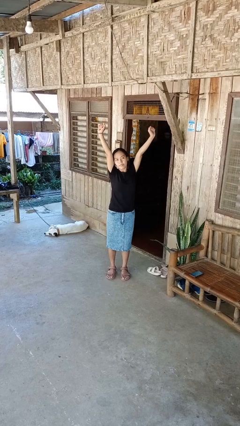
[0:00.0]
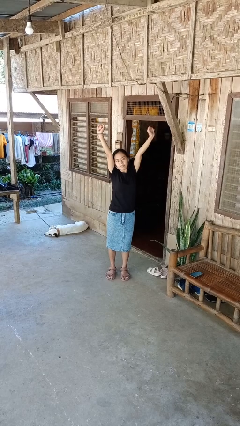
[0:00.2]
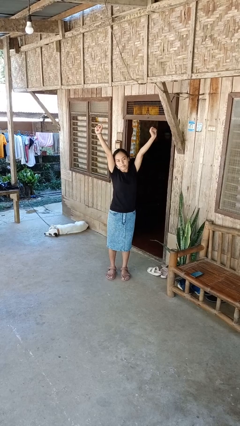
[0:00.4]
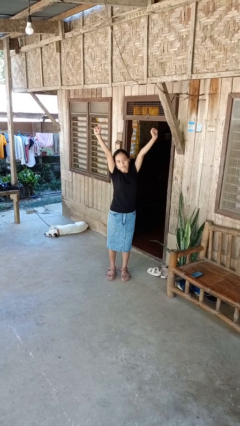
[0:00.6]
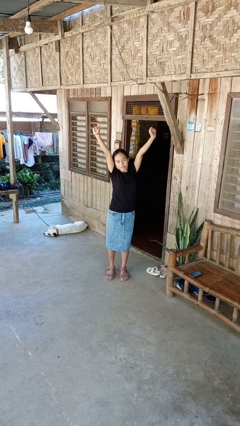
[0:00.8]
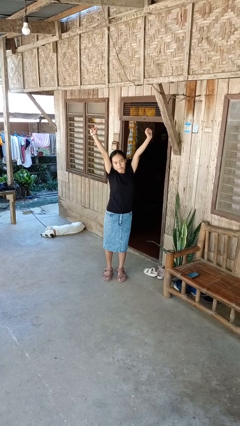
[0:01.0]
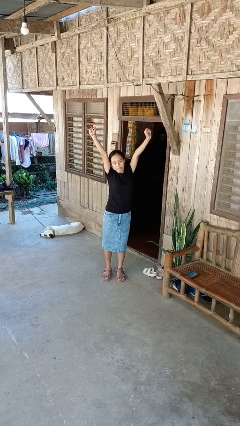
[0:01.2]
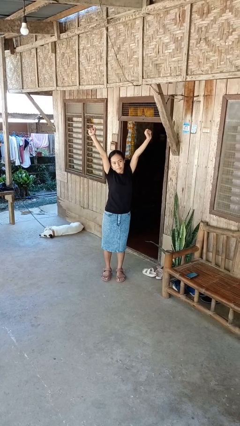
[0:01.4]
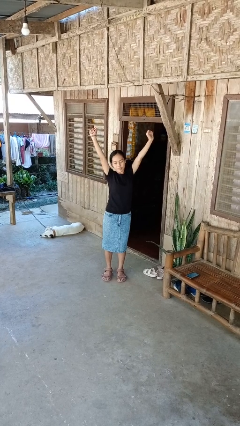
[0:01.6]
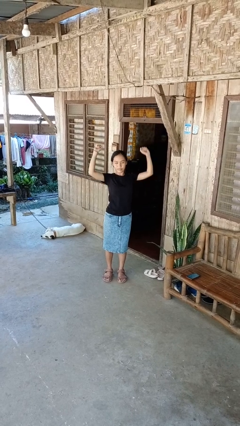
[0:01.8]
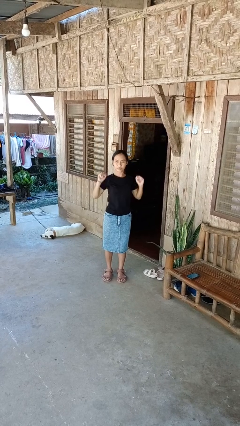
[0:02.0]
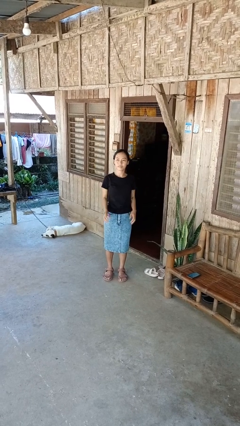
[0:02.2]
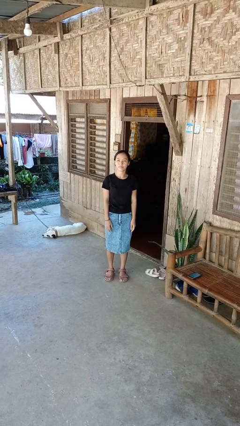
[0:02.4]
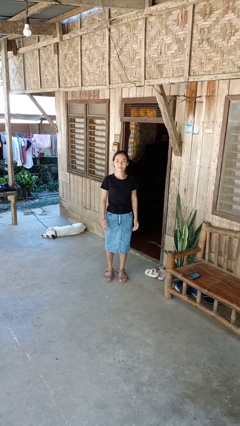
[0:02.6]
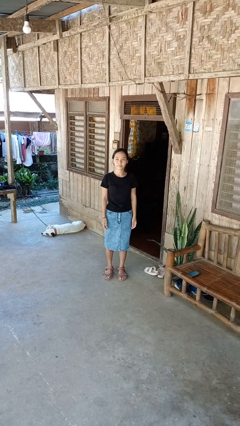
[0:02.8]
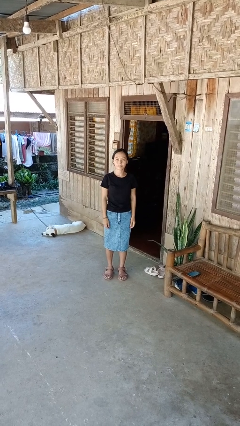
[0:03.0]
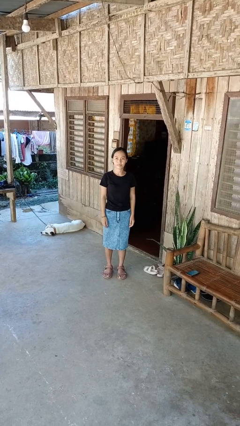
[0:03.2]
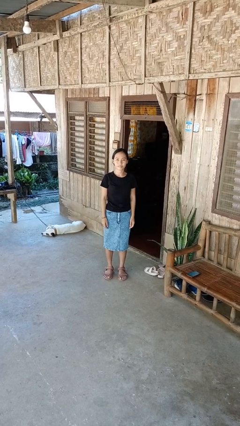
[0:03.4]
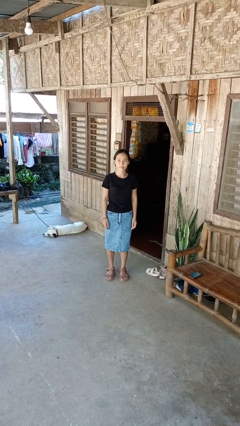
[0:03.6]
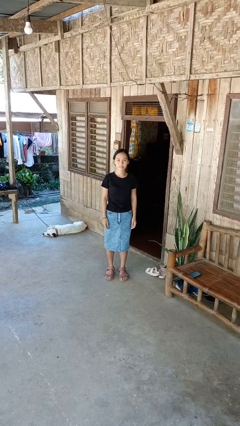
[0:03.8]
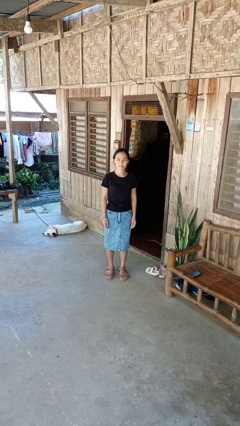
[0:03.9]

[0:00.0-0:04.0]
person stretches arms over head

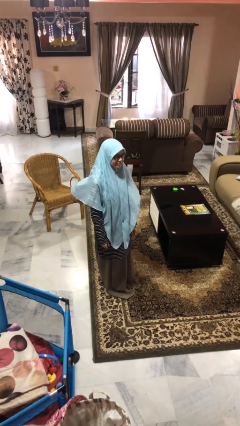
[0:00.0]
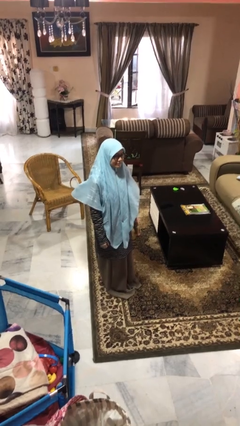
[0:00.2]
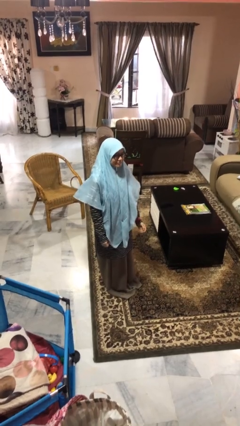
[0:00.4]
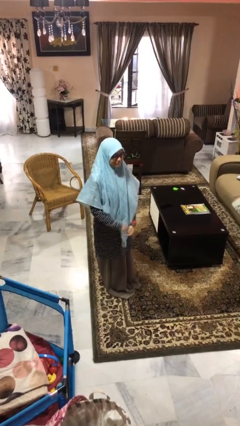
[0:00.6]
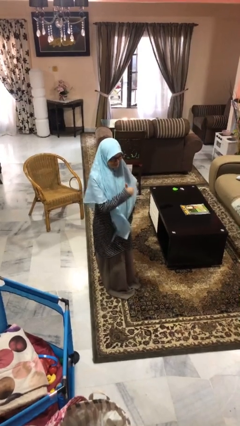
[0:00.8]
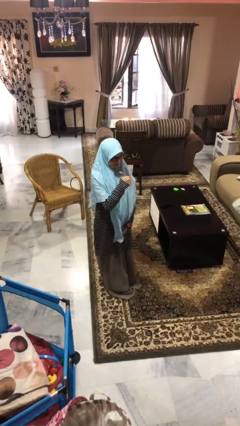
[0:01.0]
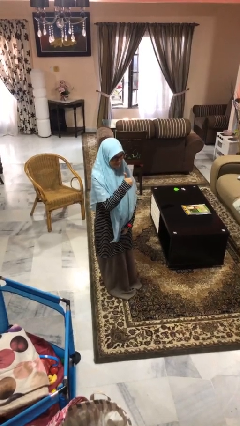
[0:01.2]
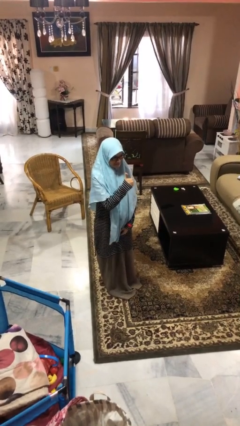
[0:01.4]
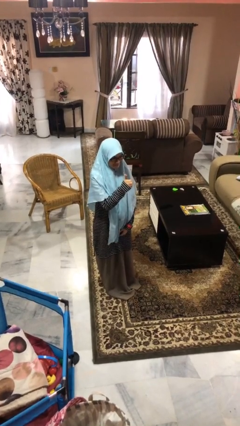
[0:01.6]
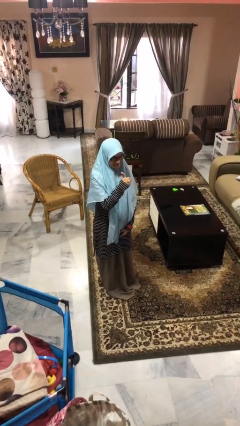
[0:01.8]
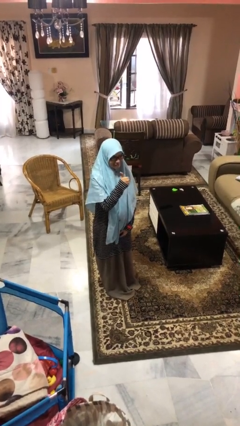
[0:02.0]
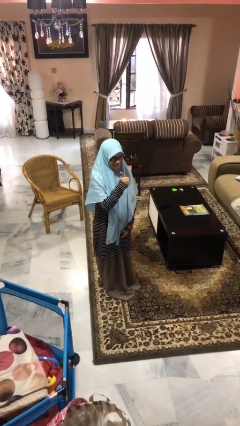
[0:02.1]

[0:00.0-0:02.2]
person gestures thumbs up

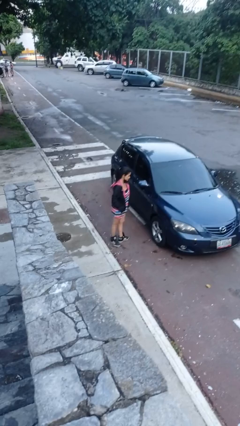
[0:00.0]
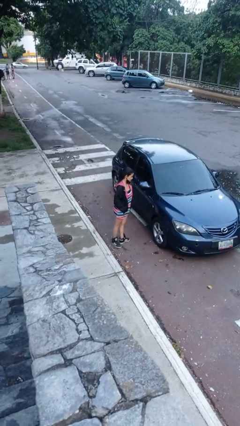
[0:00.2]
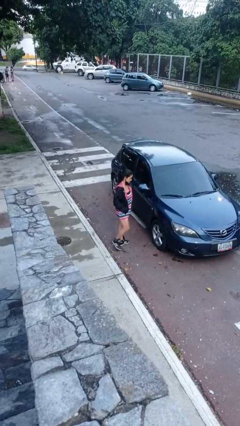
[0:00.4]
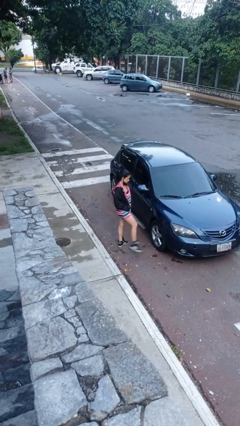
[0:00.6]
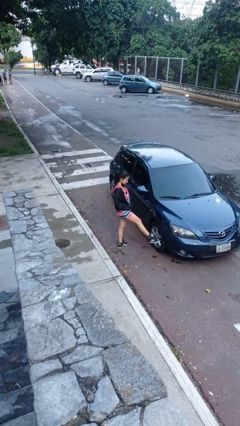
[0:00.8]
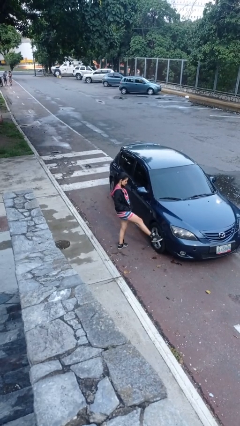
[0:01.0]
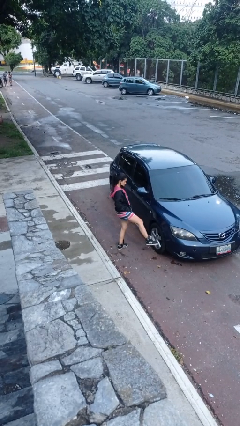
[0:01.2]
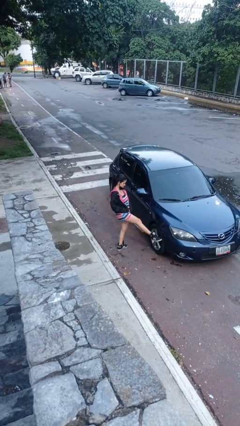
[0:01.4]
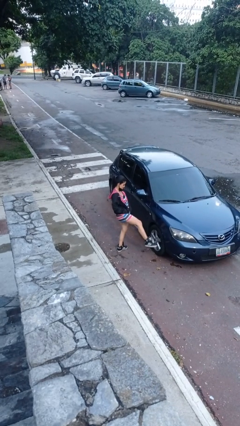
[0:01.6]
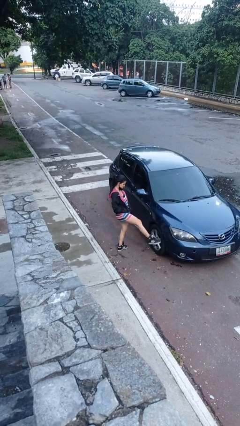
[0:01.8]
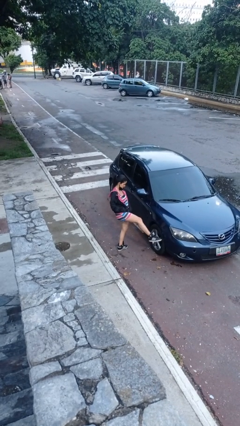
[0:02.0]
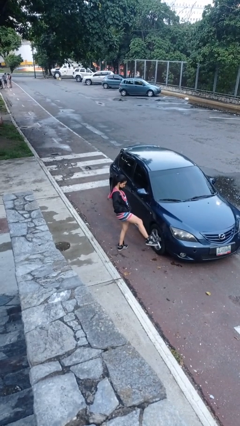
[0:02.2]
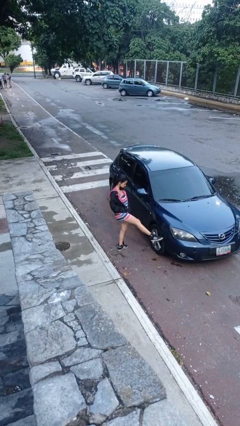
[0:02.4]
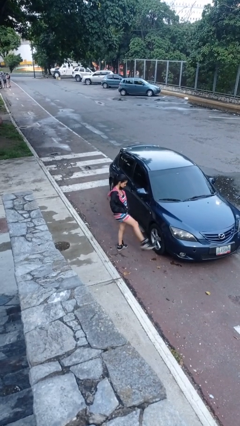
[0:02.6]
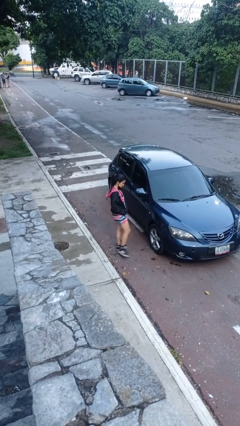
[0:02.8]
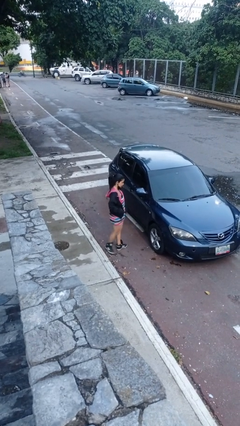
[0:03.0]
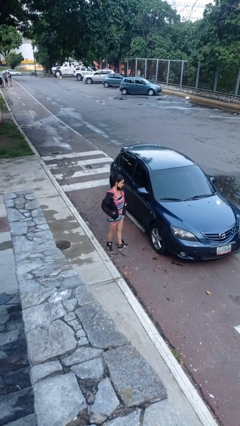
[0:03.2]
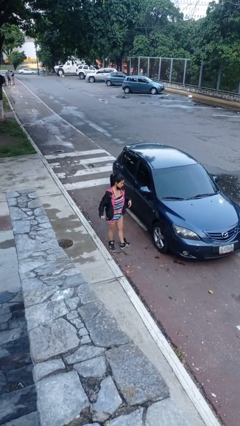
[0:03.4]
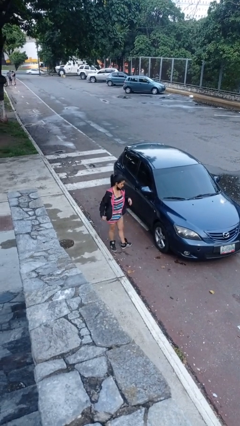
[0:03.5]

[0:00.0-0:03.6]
person kicks car tires

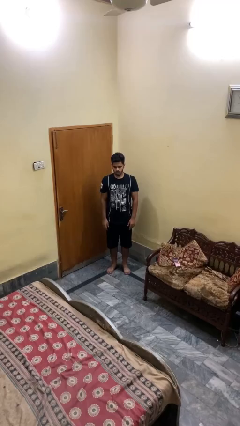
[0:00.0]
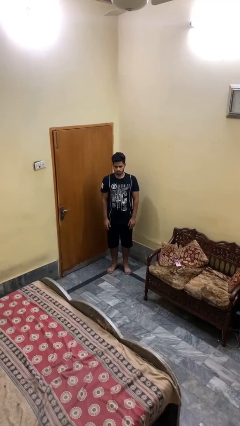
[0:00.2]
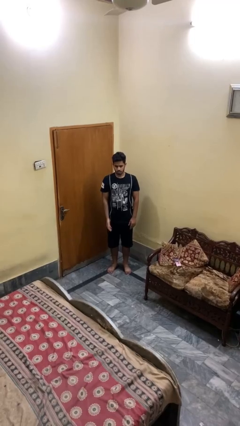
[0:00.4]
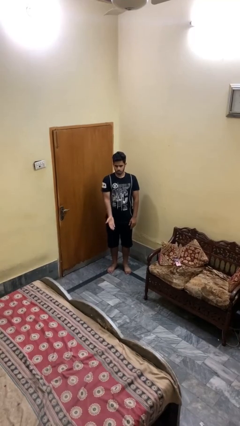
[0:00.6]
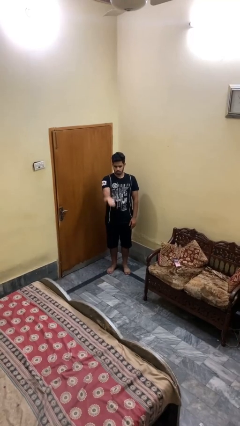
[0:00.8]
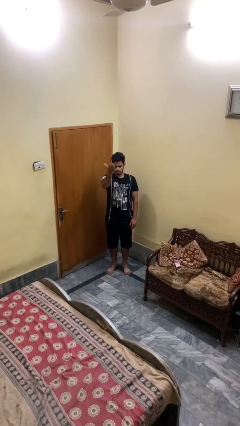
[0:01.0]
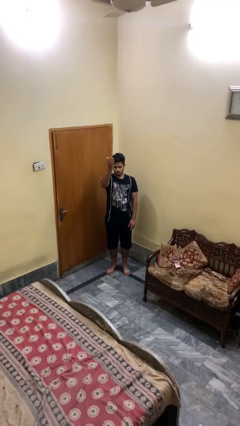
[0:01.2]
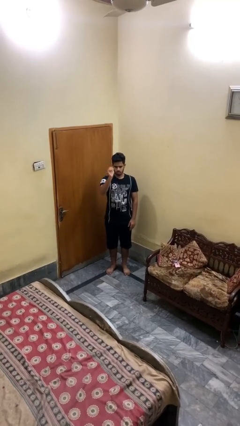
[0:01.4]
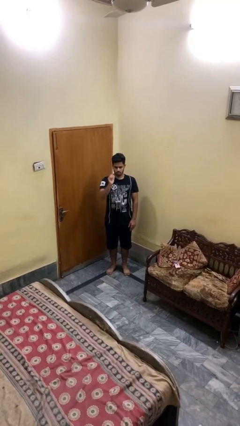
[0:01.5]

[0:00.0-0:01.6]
person gestures swipe up

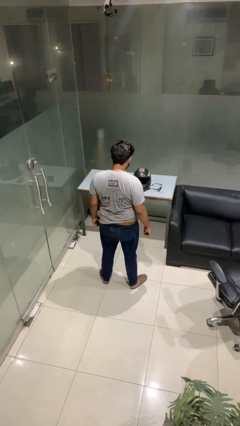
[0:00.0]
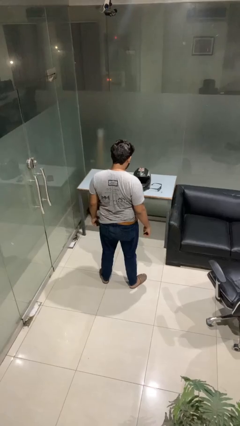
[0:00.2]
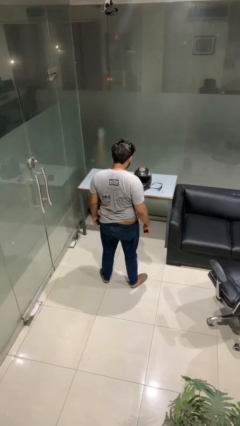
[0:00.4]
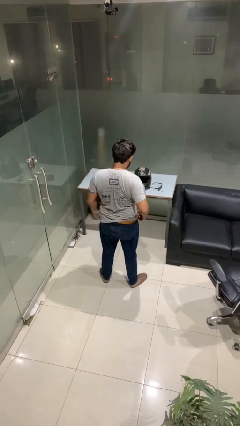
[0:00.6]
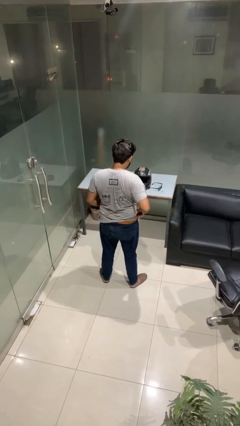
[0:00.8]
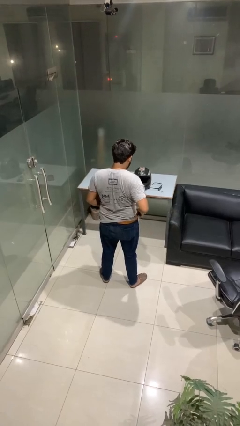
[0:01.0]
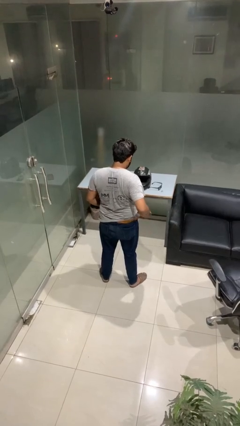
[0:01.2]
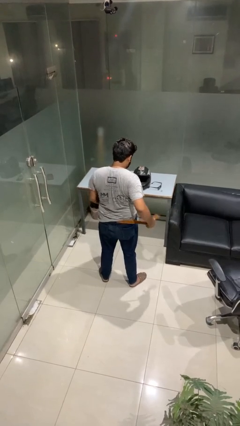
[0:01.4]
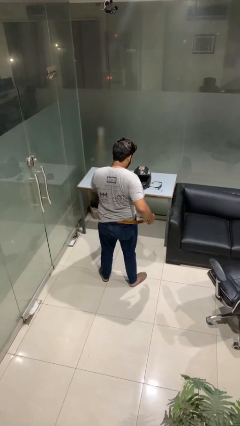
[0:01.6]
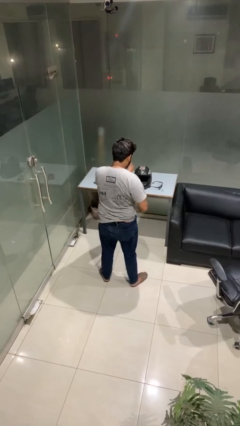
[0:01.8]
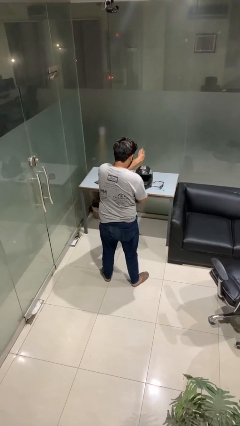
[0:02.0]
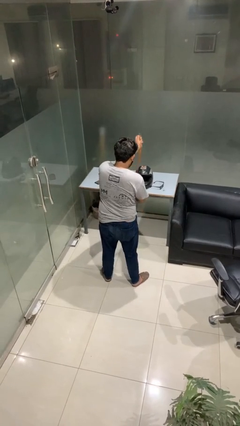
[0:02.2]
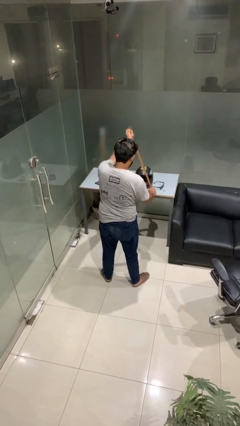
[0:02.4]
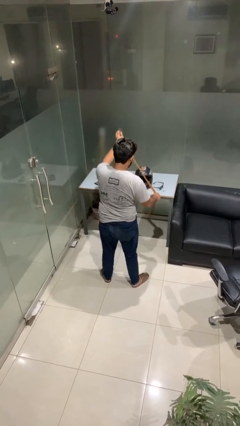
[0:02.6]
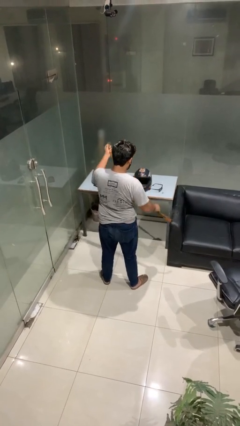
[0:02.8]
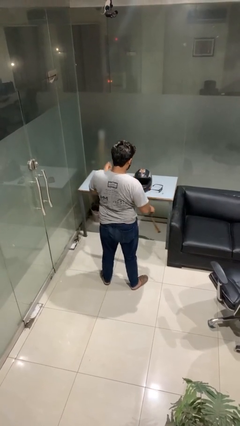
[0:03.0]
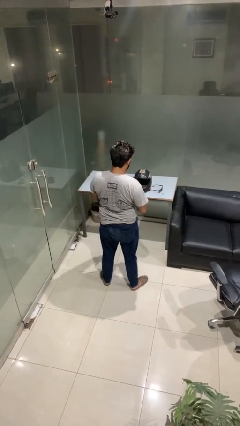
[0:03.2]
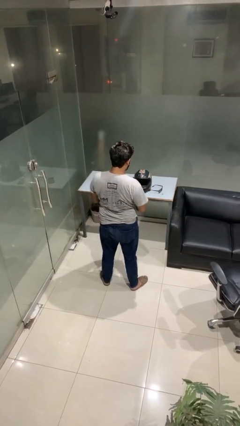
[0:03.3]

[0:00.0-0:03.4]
person takes off belt

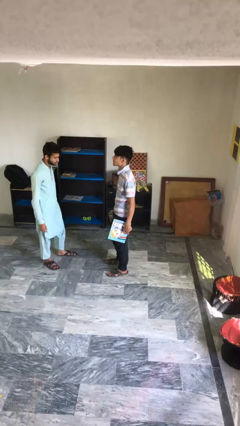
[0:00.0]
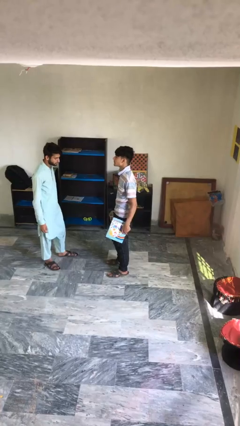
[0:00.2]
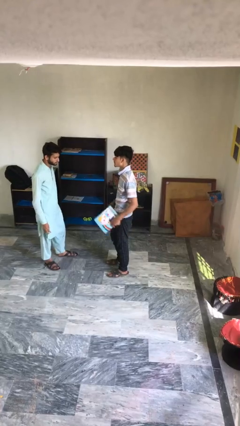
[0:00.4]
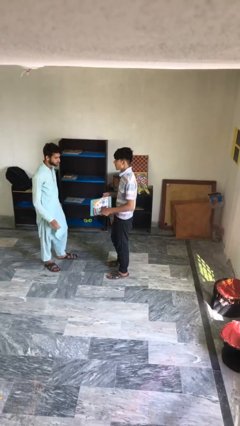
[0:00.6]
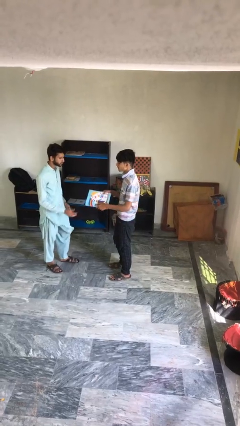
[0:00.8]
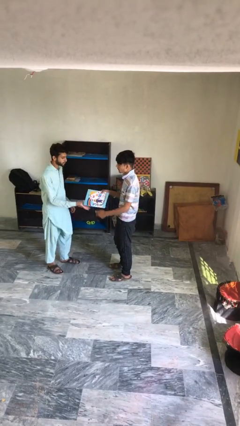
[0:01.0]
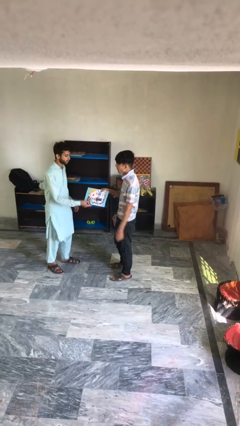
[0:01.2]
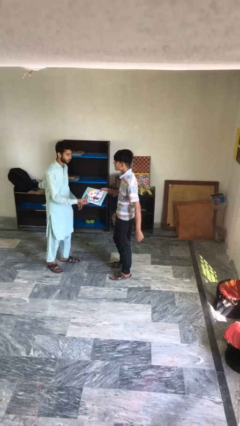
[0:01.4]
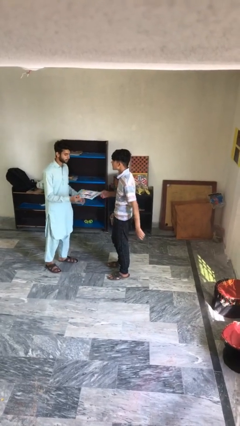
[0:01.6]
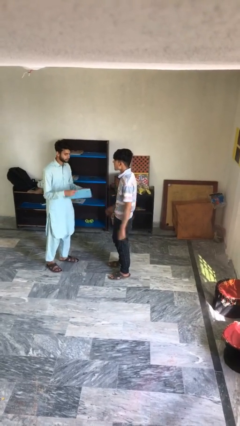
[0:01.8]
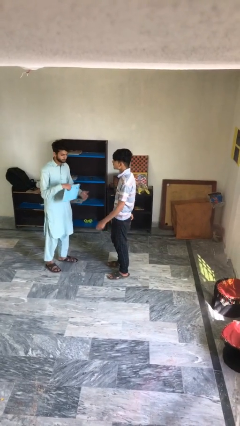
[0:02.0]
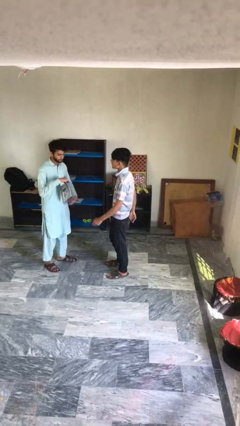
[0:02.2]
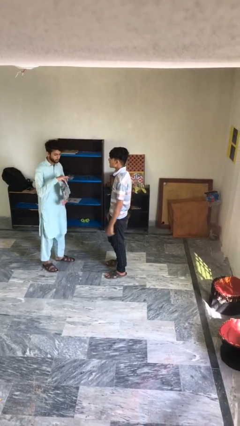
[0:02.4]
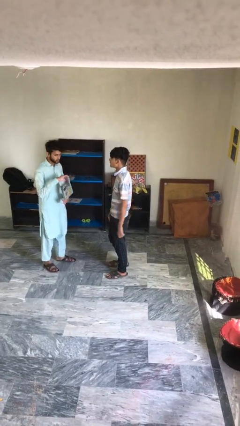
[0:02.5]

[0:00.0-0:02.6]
person transfers object to person

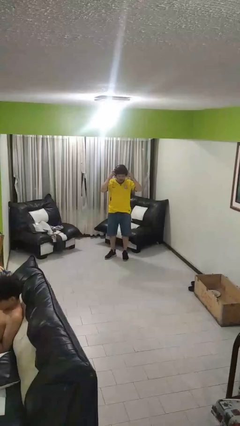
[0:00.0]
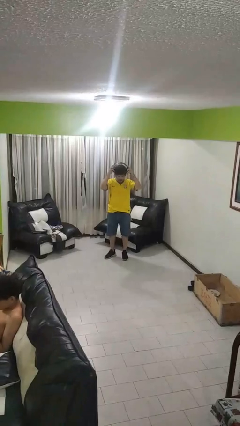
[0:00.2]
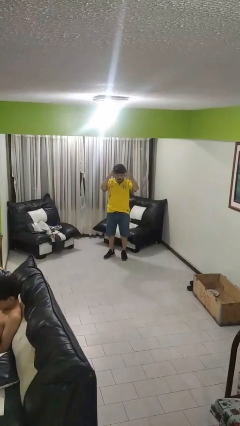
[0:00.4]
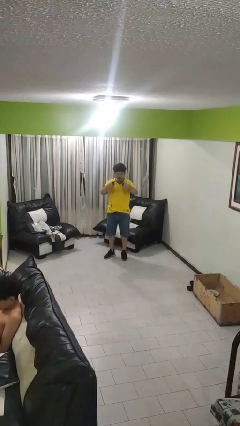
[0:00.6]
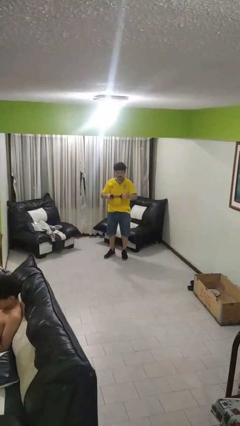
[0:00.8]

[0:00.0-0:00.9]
person takes off headphones
